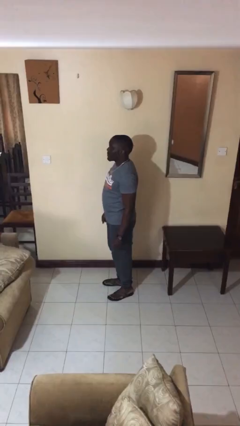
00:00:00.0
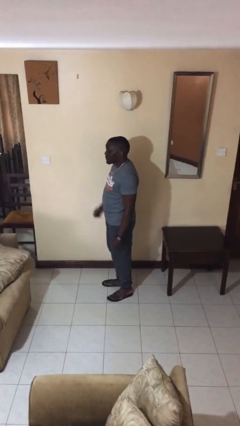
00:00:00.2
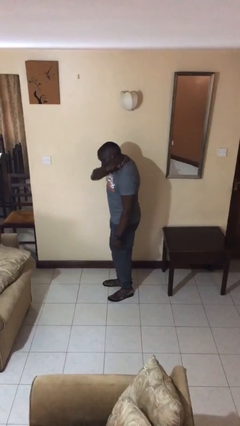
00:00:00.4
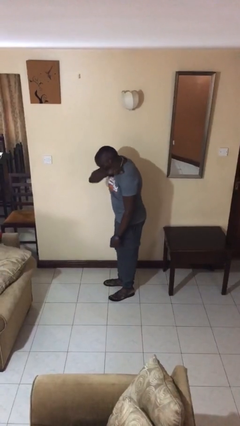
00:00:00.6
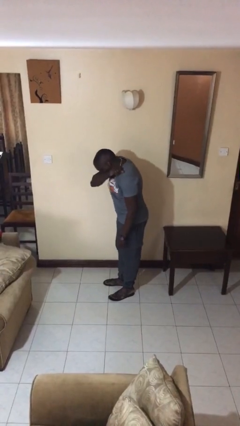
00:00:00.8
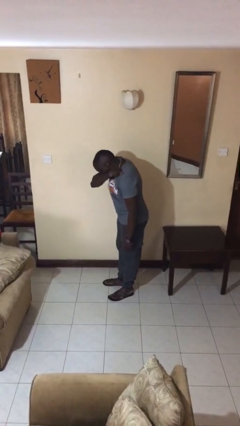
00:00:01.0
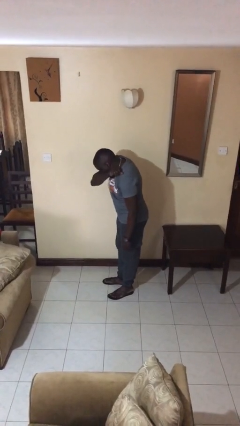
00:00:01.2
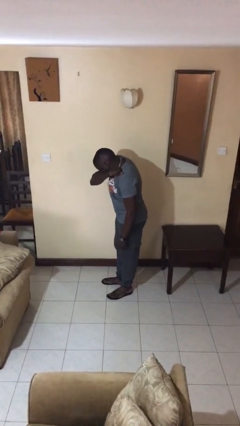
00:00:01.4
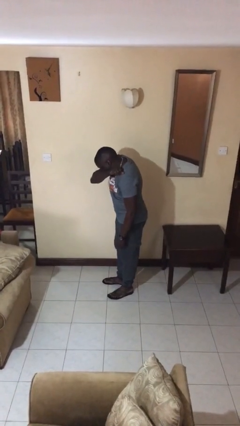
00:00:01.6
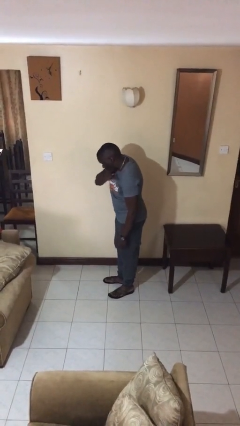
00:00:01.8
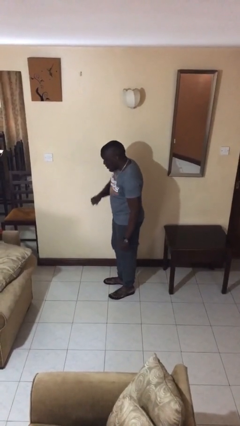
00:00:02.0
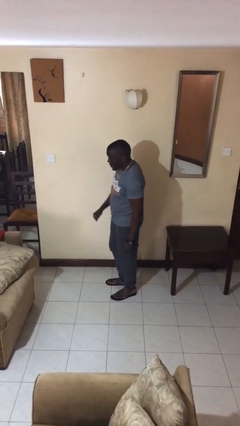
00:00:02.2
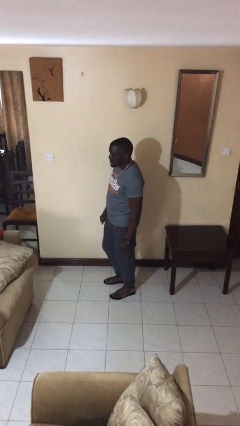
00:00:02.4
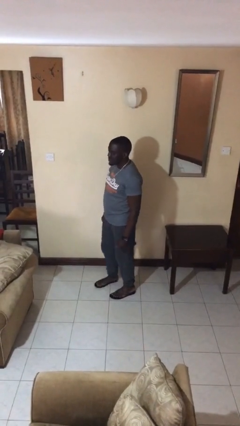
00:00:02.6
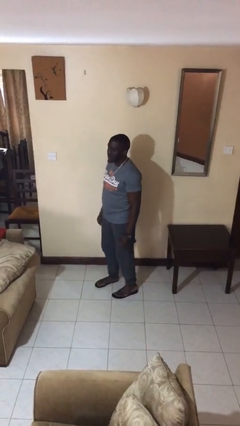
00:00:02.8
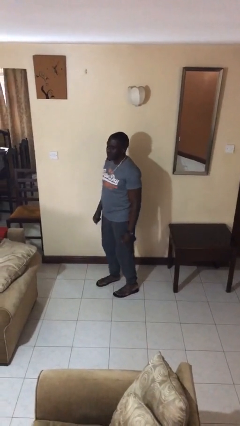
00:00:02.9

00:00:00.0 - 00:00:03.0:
person sneezes into arm

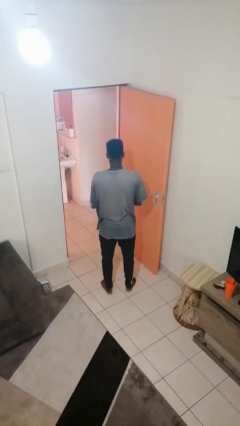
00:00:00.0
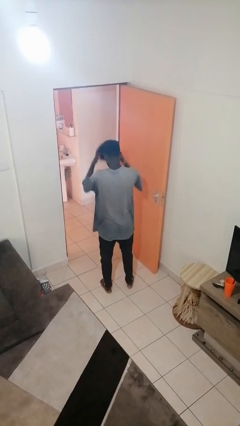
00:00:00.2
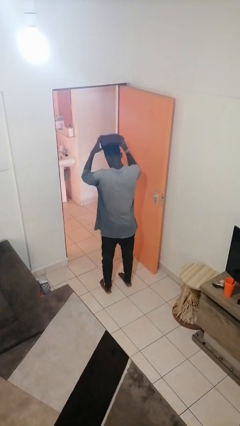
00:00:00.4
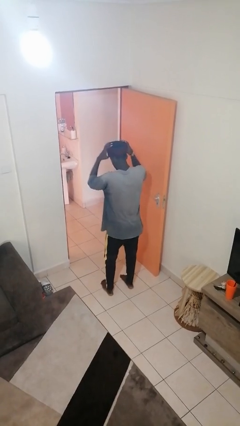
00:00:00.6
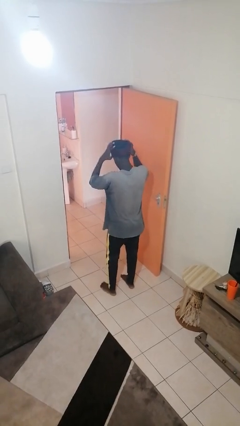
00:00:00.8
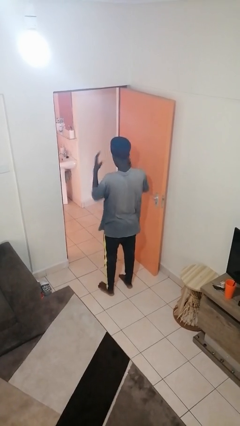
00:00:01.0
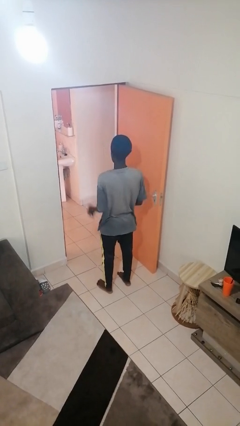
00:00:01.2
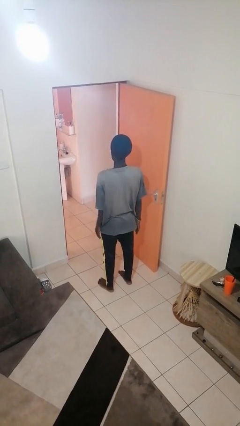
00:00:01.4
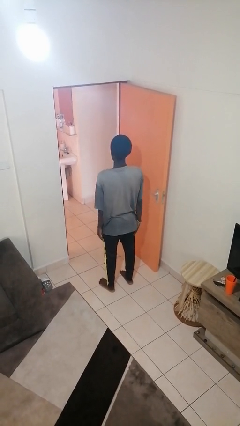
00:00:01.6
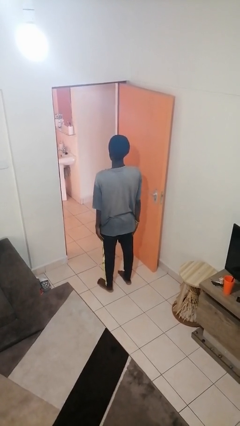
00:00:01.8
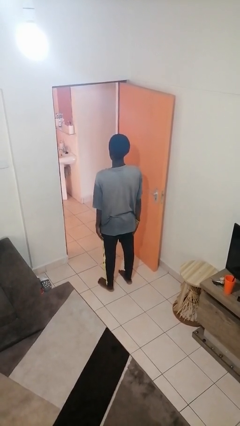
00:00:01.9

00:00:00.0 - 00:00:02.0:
person puts on hat

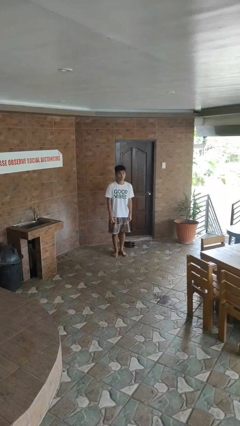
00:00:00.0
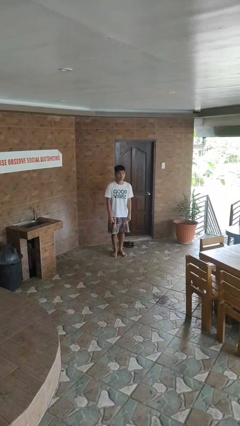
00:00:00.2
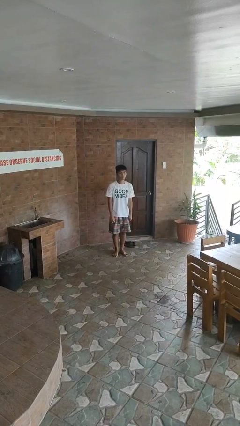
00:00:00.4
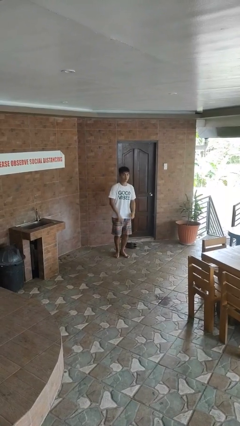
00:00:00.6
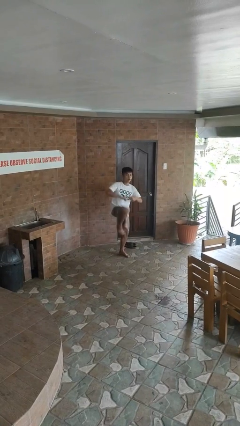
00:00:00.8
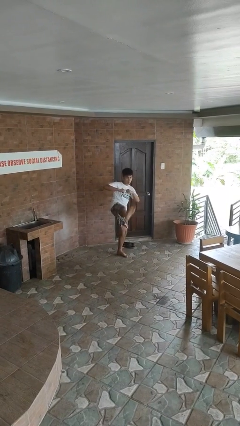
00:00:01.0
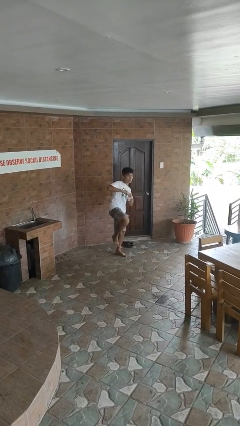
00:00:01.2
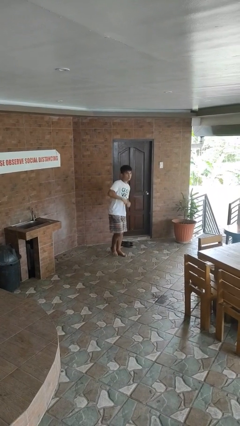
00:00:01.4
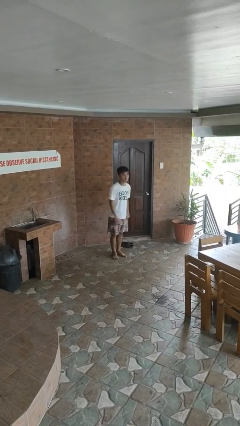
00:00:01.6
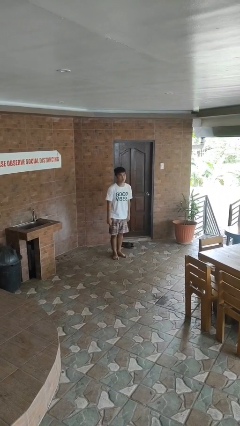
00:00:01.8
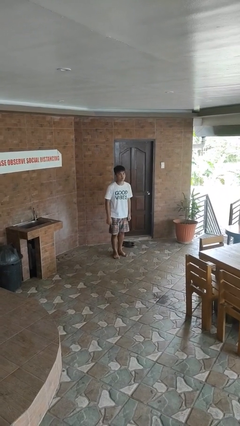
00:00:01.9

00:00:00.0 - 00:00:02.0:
person karate kicks

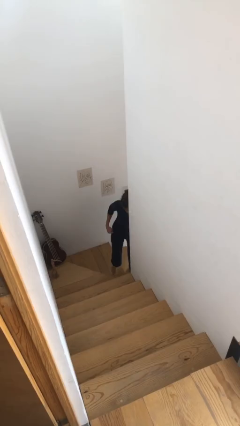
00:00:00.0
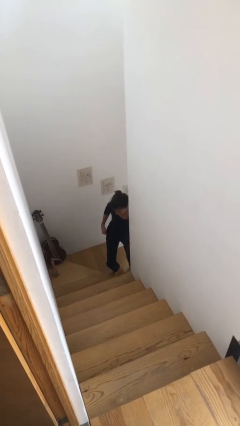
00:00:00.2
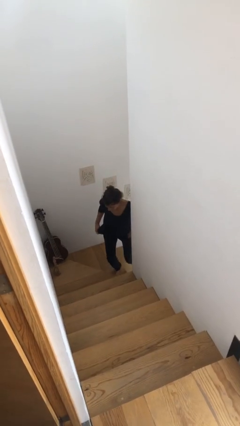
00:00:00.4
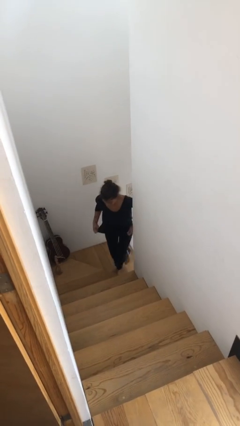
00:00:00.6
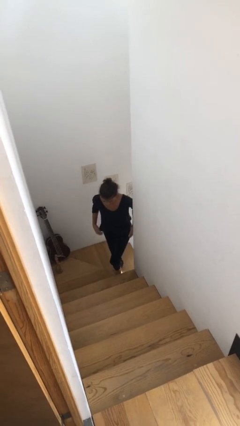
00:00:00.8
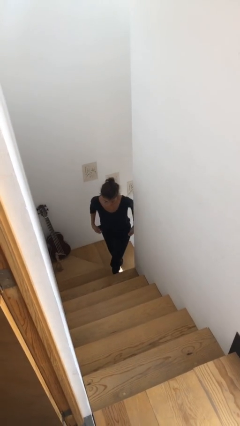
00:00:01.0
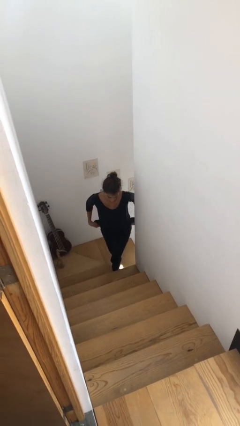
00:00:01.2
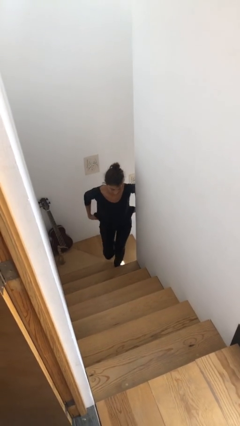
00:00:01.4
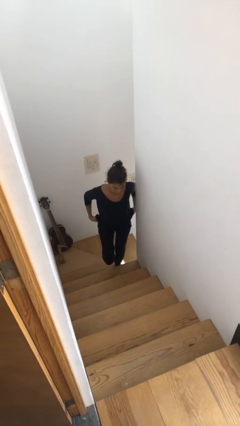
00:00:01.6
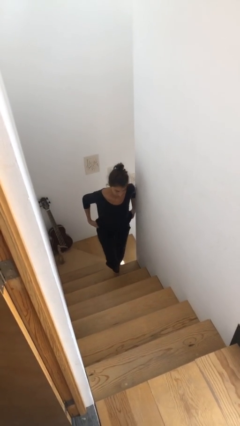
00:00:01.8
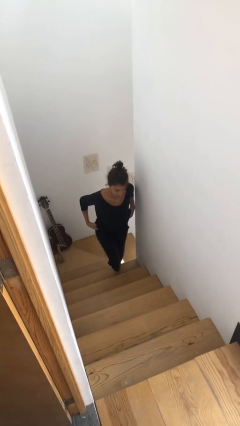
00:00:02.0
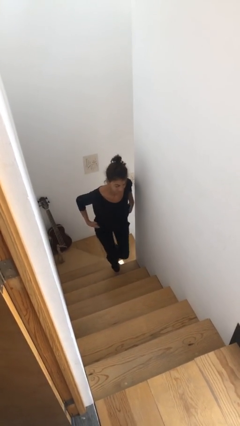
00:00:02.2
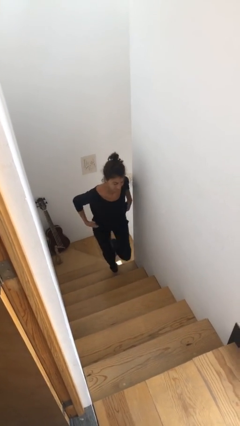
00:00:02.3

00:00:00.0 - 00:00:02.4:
person climbs up stairs

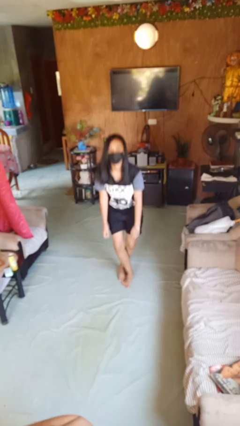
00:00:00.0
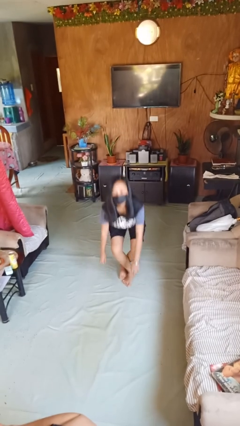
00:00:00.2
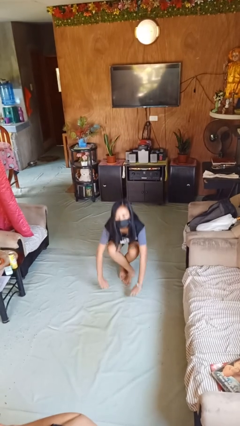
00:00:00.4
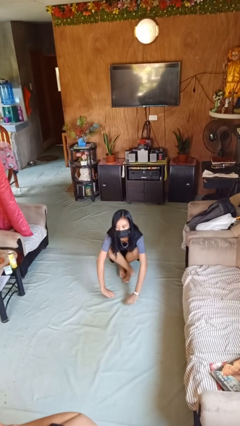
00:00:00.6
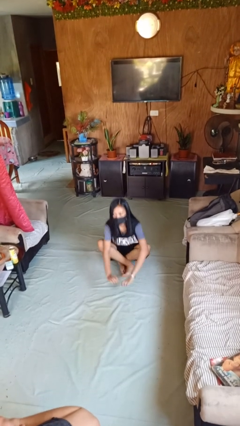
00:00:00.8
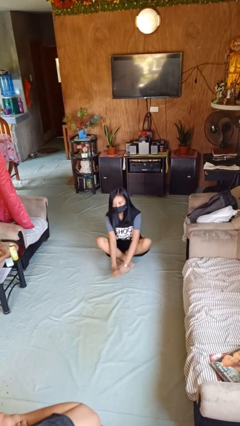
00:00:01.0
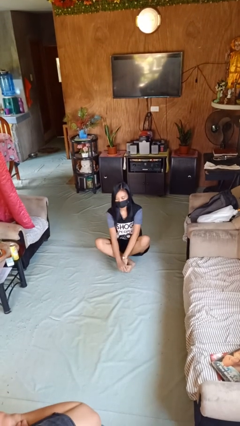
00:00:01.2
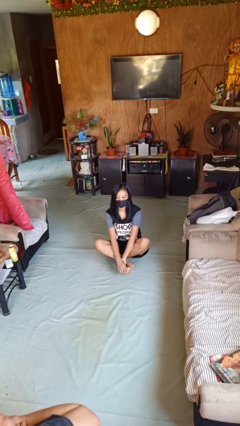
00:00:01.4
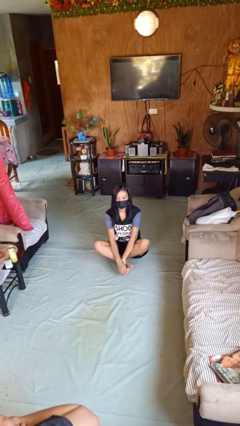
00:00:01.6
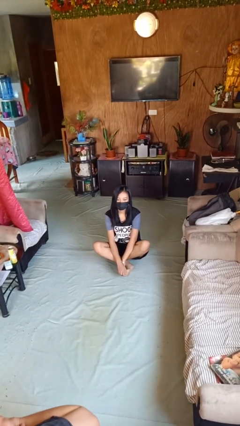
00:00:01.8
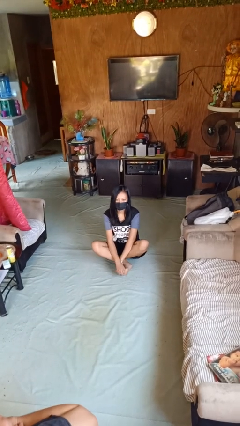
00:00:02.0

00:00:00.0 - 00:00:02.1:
person sits crisscross

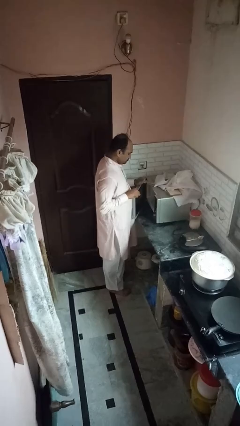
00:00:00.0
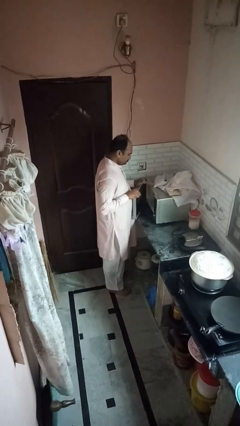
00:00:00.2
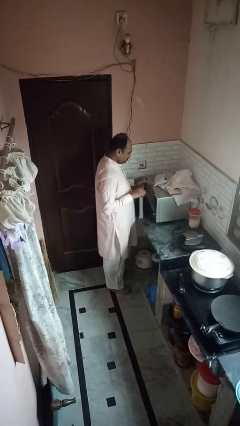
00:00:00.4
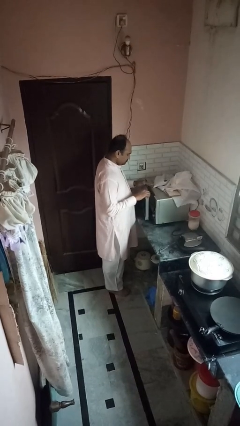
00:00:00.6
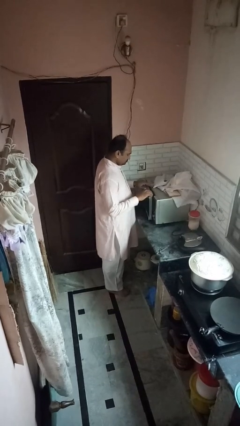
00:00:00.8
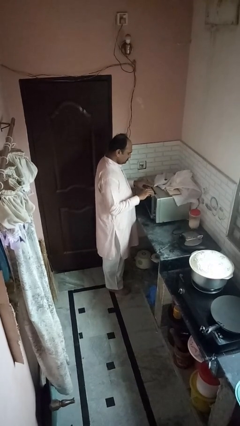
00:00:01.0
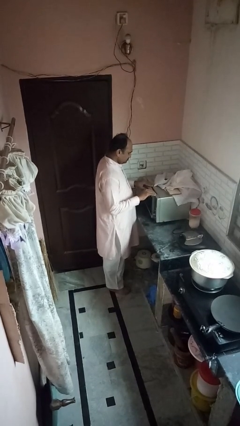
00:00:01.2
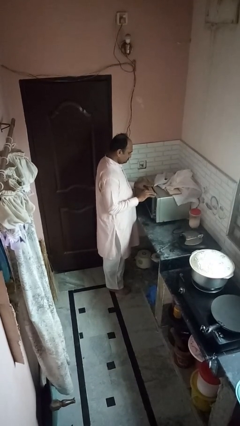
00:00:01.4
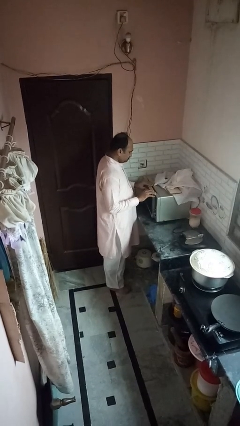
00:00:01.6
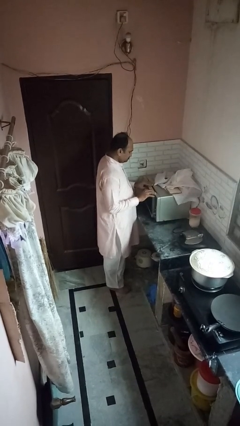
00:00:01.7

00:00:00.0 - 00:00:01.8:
person closes oven door

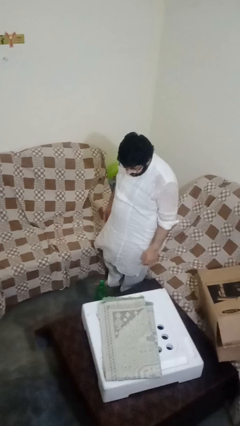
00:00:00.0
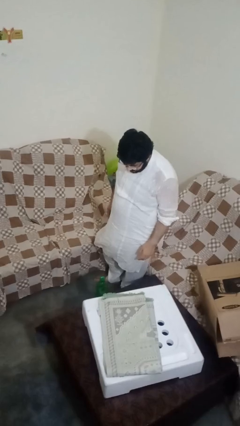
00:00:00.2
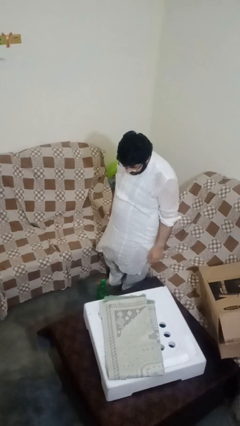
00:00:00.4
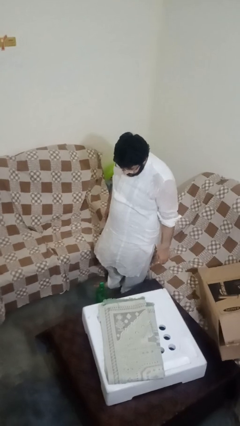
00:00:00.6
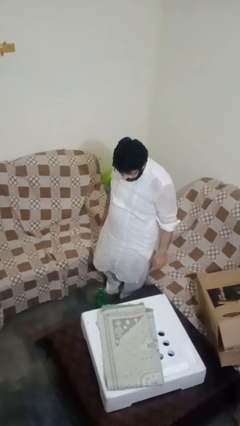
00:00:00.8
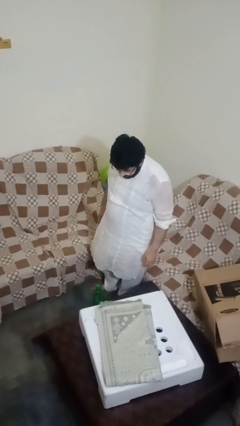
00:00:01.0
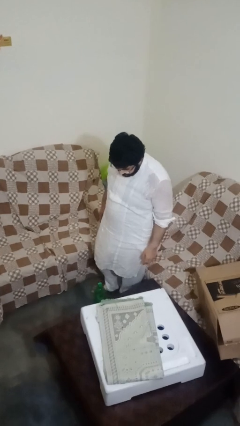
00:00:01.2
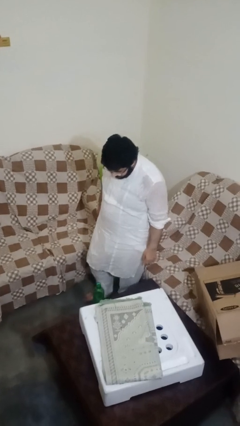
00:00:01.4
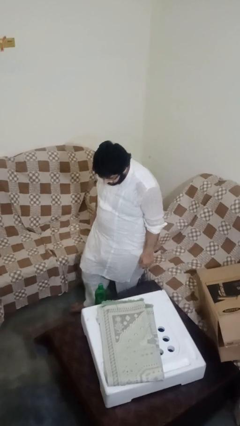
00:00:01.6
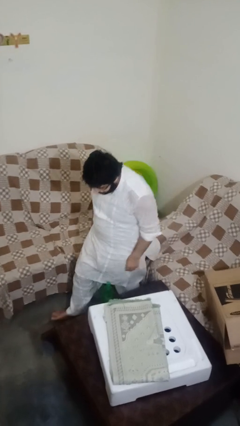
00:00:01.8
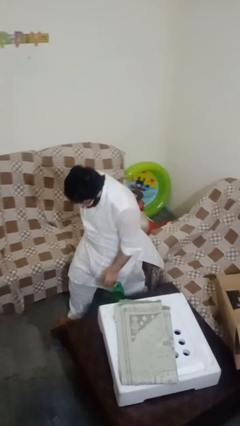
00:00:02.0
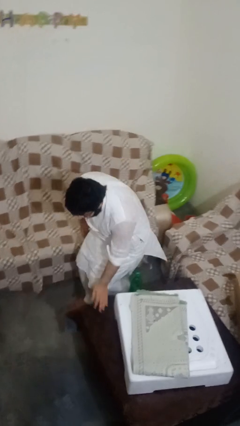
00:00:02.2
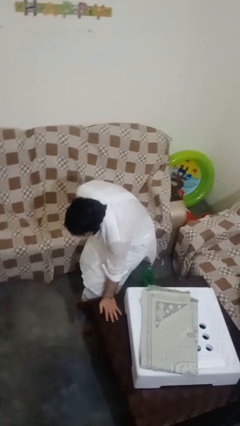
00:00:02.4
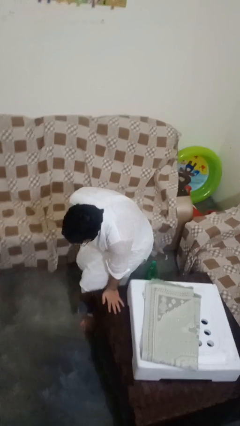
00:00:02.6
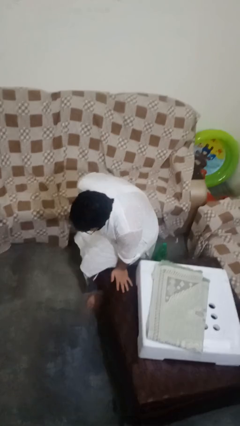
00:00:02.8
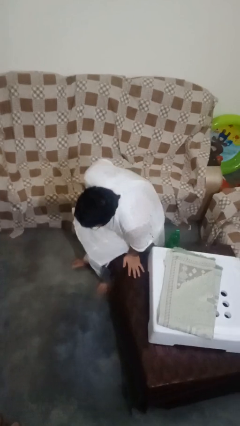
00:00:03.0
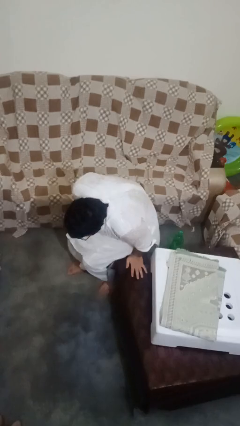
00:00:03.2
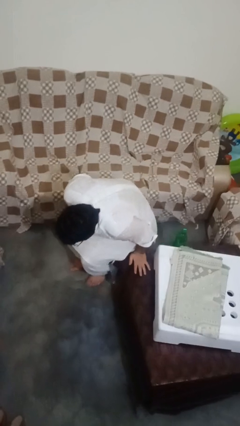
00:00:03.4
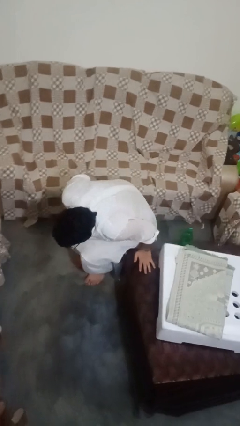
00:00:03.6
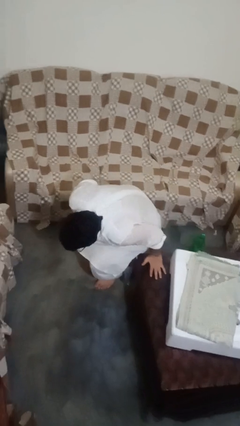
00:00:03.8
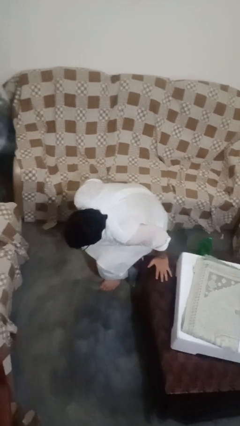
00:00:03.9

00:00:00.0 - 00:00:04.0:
person bumps into table
